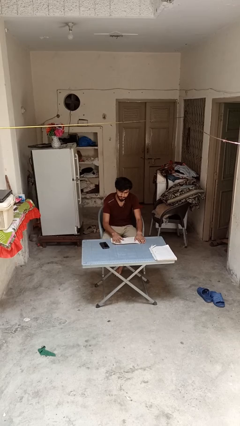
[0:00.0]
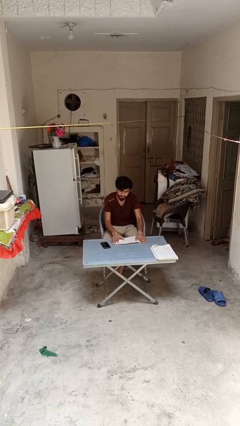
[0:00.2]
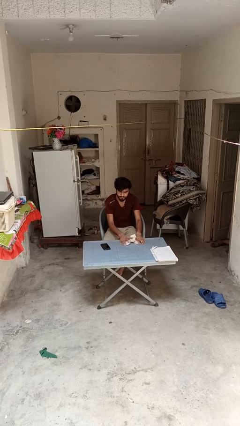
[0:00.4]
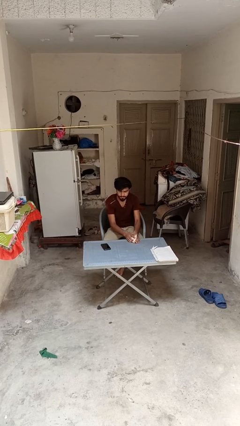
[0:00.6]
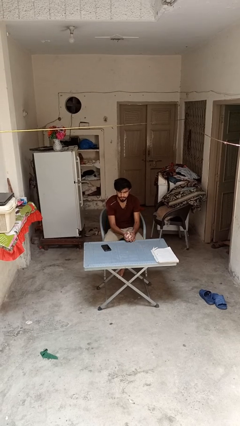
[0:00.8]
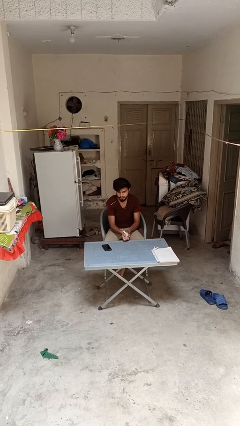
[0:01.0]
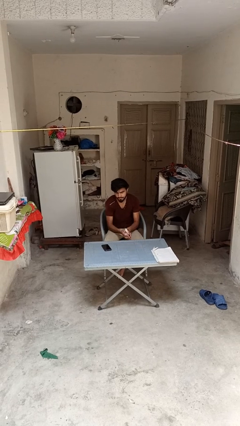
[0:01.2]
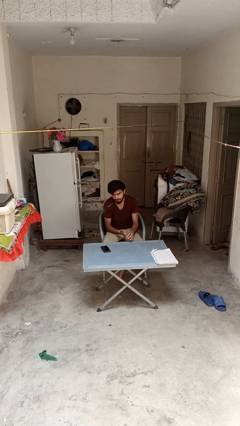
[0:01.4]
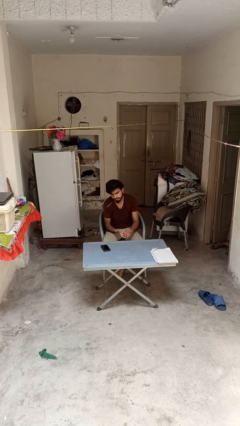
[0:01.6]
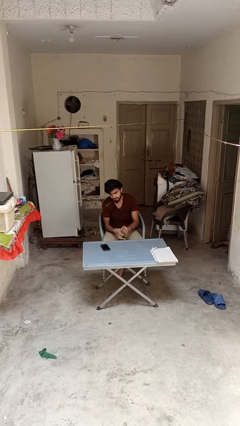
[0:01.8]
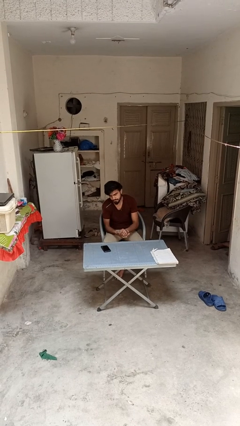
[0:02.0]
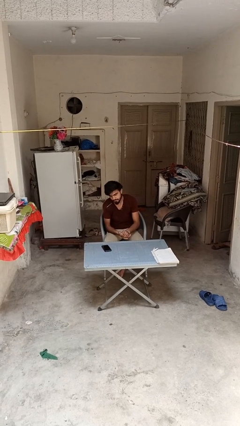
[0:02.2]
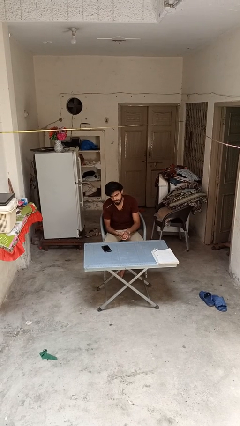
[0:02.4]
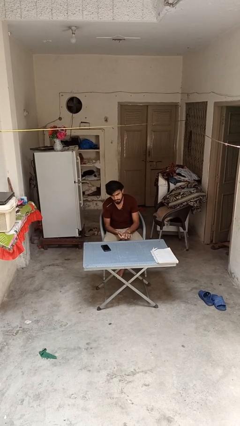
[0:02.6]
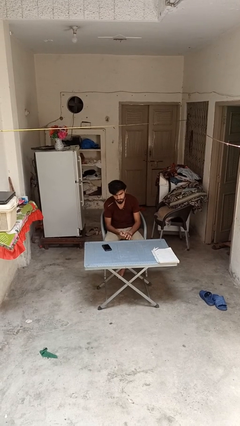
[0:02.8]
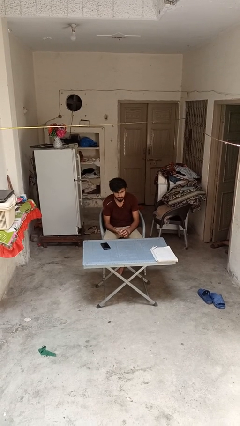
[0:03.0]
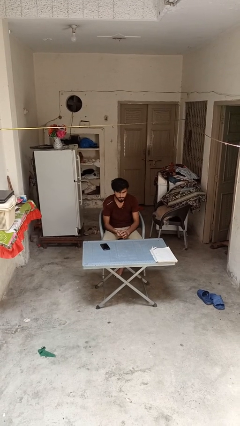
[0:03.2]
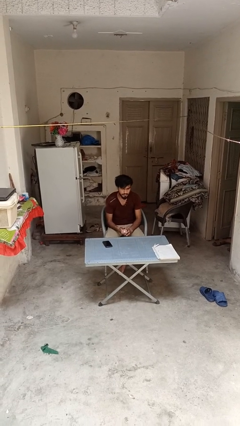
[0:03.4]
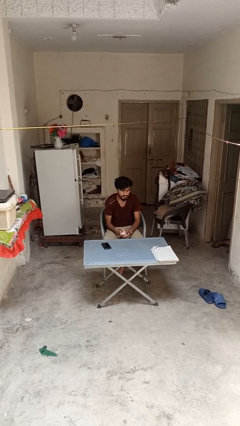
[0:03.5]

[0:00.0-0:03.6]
person crumples paper

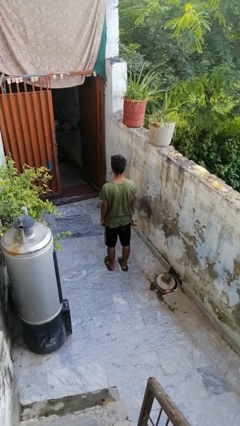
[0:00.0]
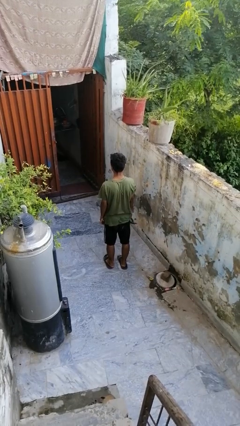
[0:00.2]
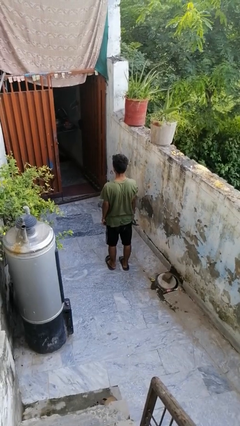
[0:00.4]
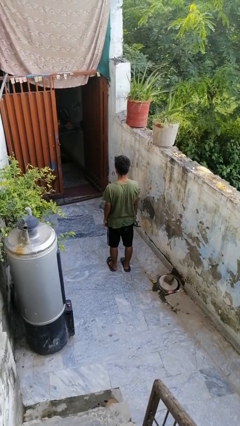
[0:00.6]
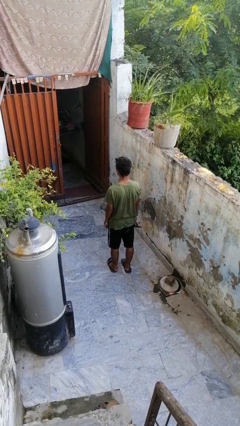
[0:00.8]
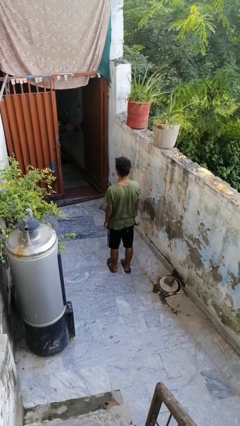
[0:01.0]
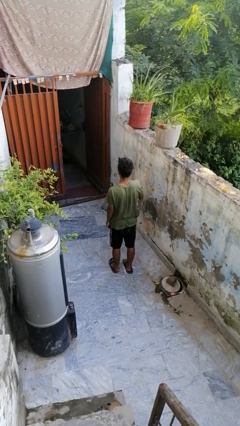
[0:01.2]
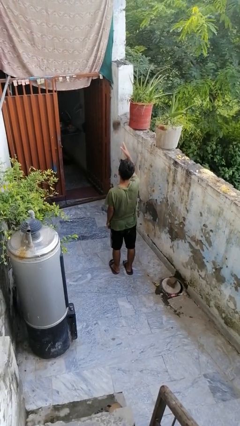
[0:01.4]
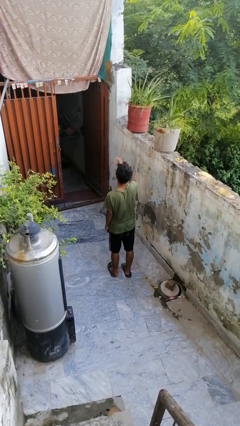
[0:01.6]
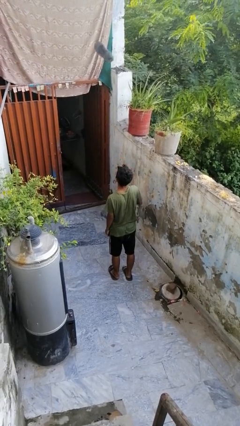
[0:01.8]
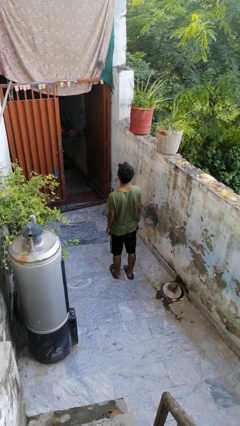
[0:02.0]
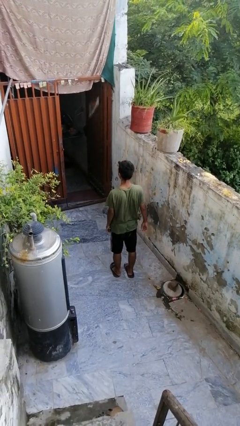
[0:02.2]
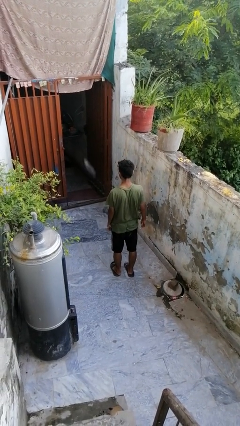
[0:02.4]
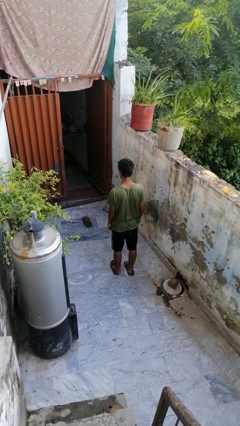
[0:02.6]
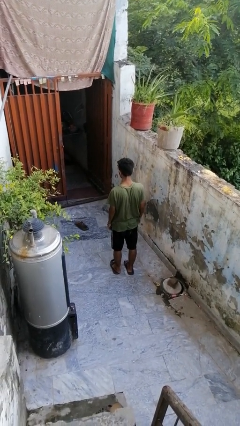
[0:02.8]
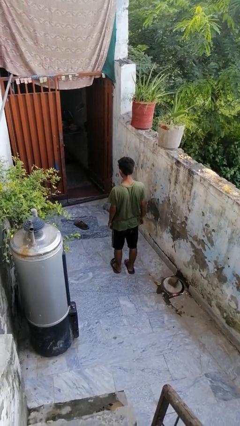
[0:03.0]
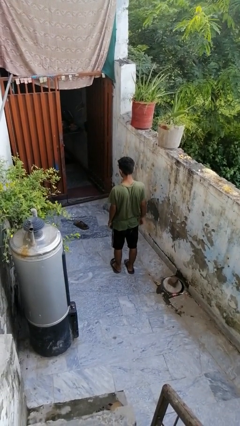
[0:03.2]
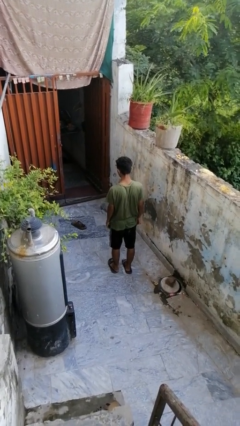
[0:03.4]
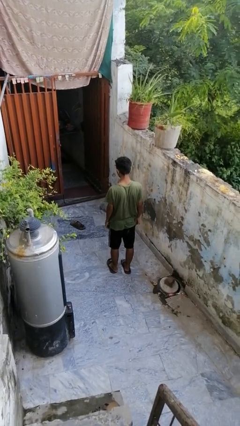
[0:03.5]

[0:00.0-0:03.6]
person throws object into air

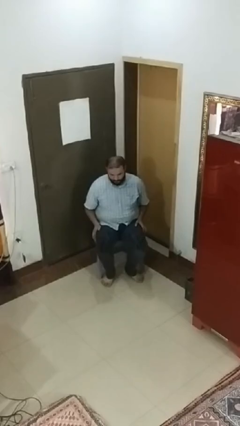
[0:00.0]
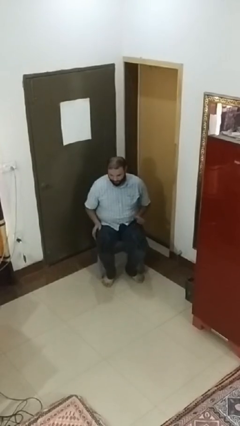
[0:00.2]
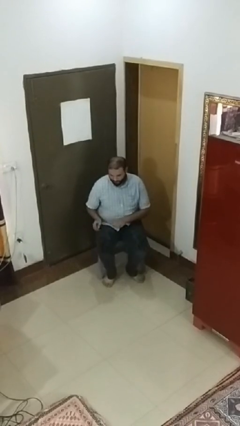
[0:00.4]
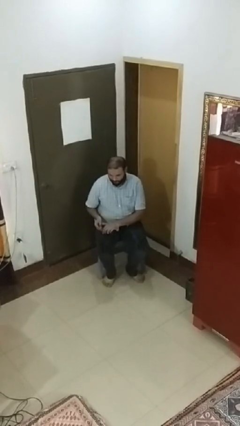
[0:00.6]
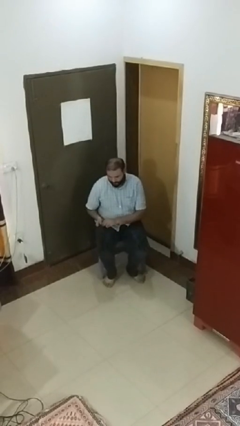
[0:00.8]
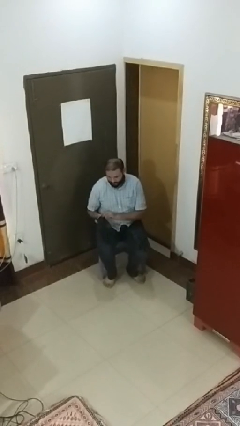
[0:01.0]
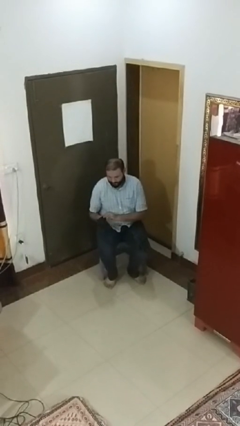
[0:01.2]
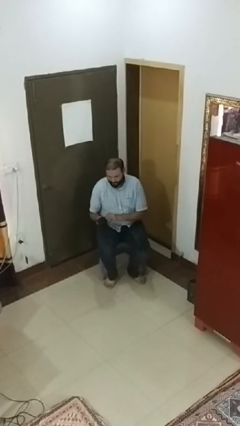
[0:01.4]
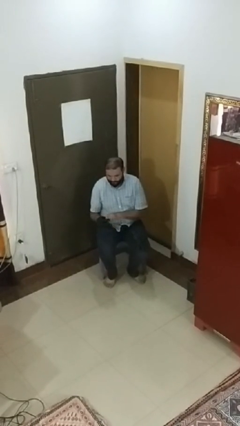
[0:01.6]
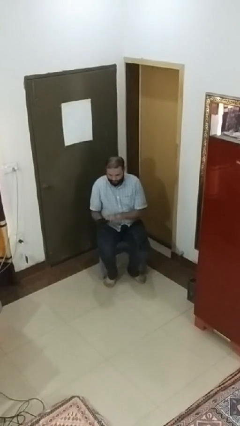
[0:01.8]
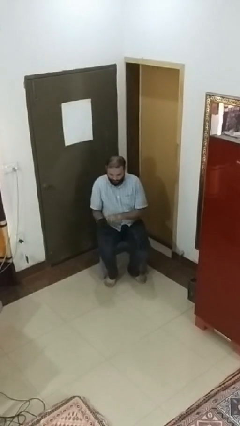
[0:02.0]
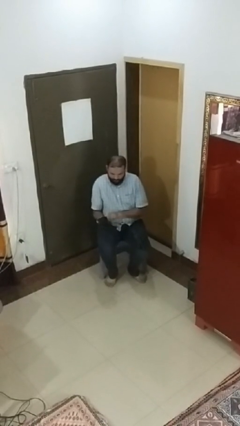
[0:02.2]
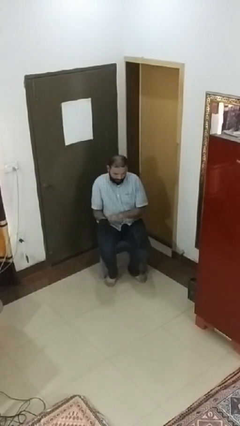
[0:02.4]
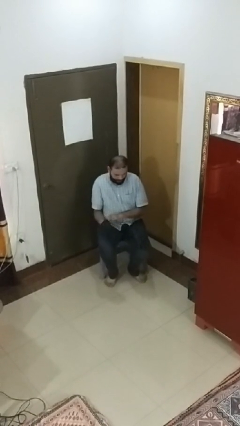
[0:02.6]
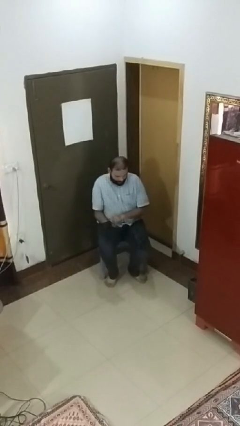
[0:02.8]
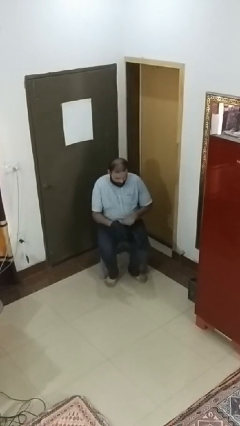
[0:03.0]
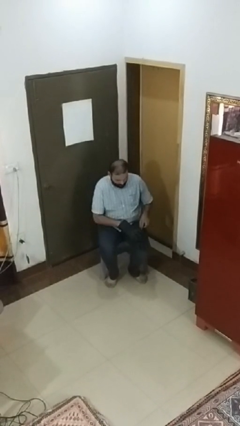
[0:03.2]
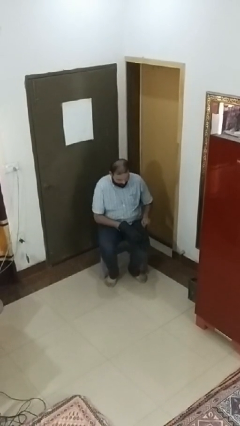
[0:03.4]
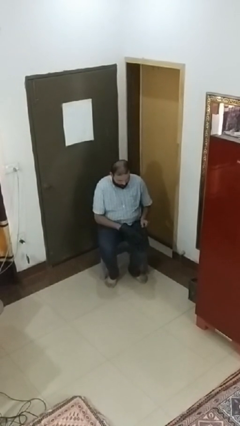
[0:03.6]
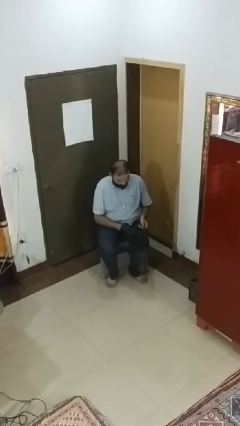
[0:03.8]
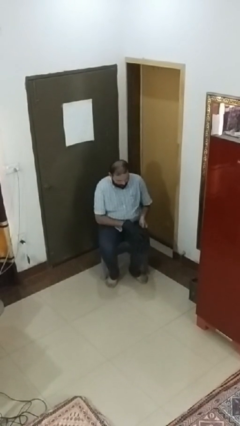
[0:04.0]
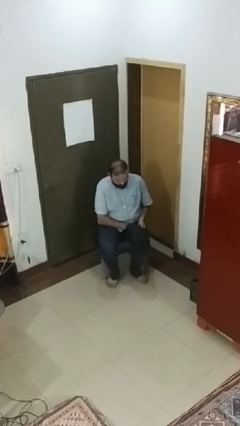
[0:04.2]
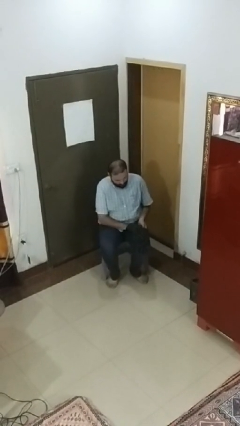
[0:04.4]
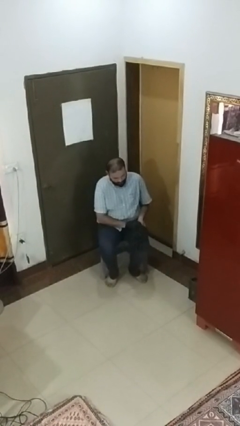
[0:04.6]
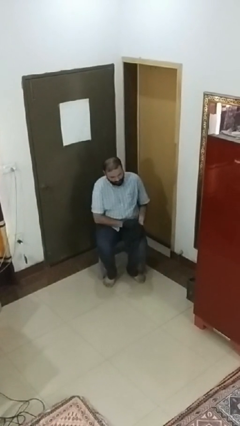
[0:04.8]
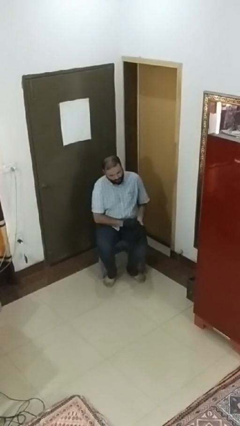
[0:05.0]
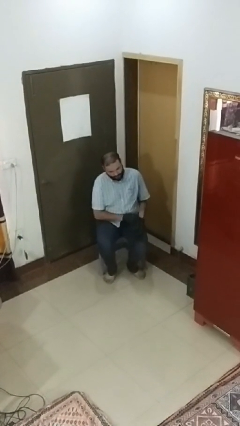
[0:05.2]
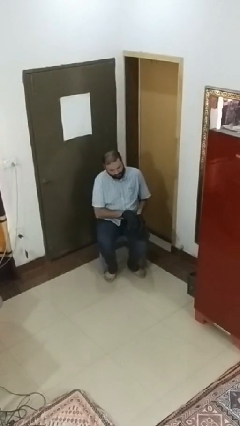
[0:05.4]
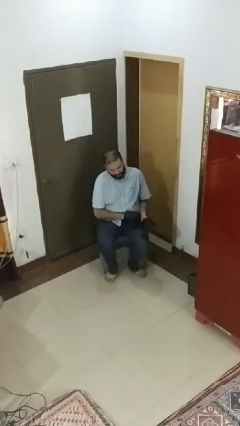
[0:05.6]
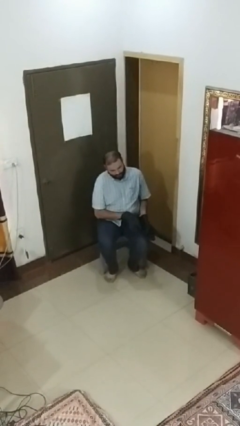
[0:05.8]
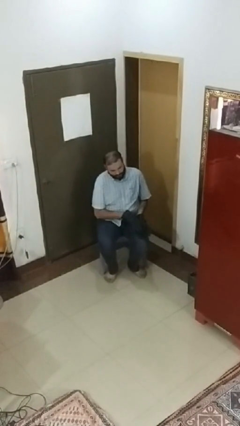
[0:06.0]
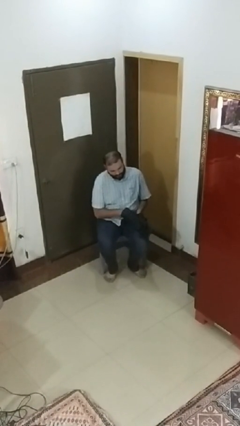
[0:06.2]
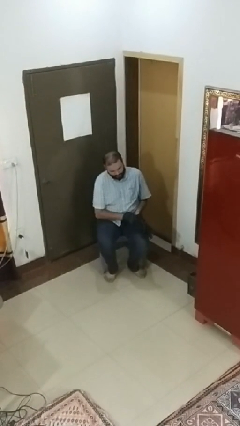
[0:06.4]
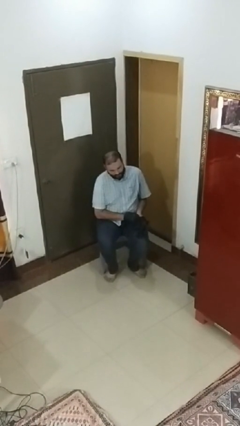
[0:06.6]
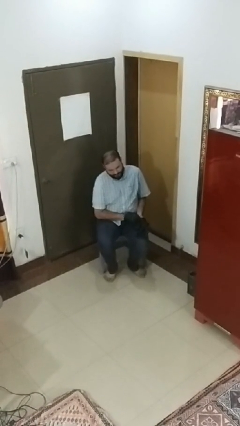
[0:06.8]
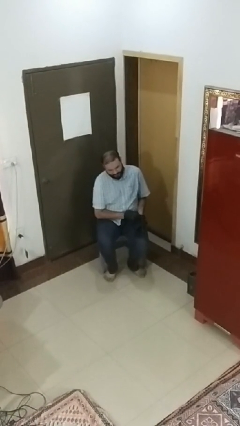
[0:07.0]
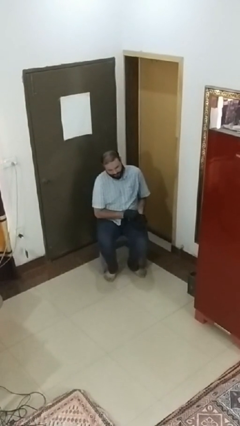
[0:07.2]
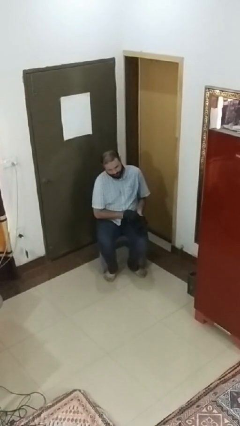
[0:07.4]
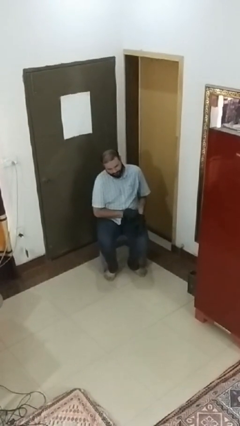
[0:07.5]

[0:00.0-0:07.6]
person puts on gloves

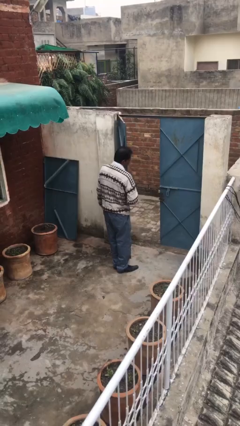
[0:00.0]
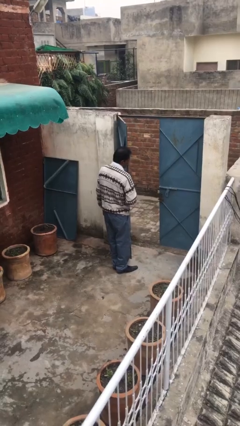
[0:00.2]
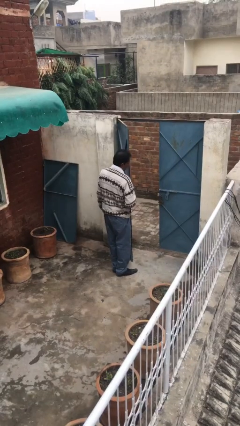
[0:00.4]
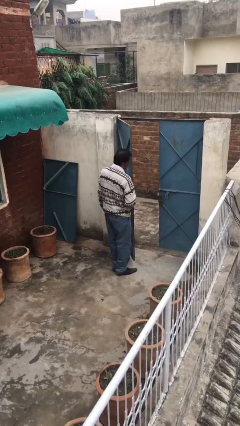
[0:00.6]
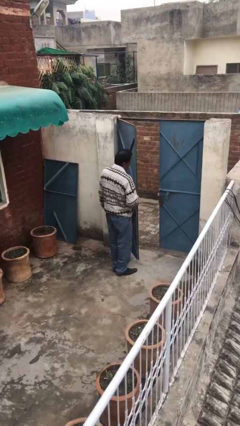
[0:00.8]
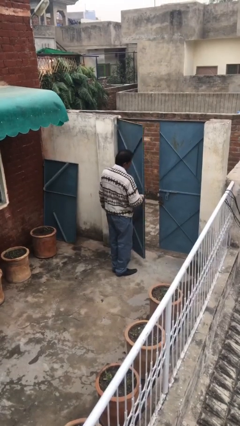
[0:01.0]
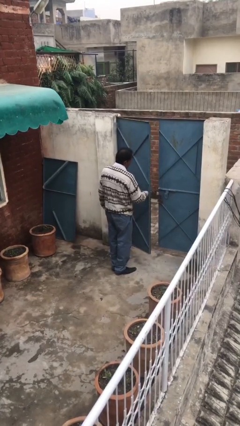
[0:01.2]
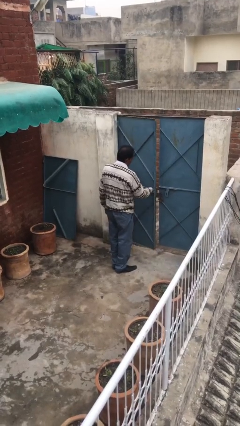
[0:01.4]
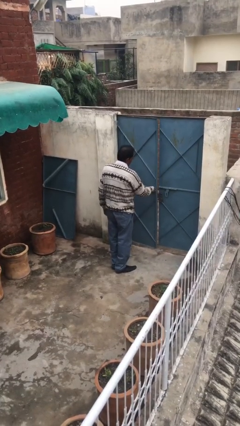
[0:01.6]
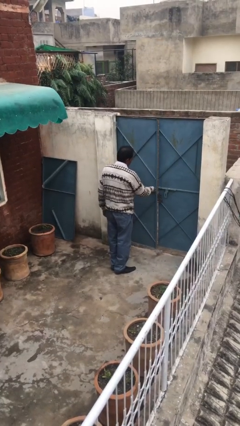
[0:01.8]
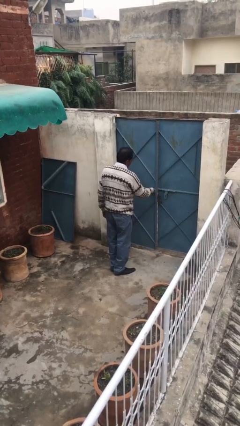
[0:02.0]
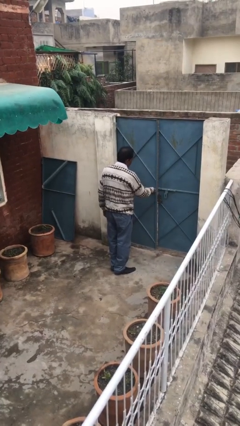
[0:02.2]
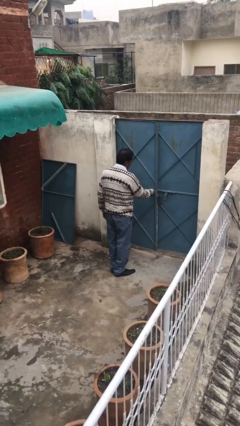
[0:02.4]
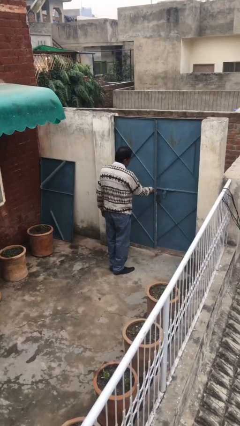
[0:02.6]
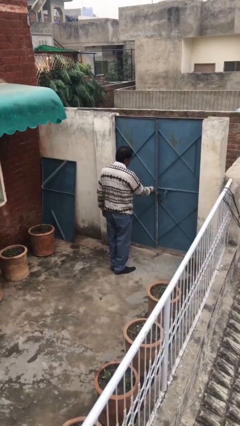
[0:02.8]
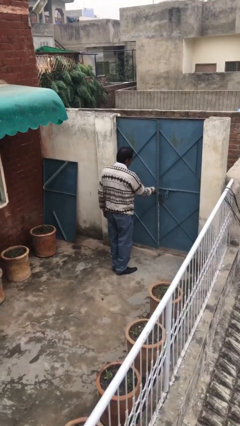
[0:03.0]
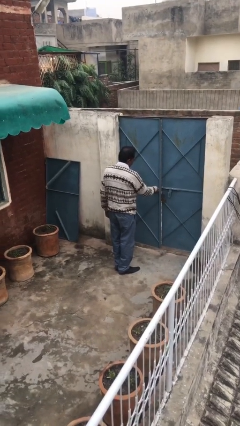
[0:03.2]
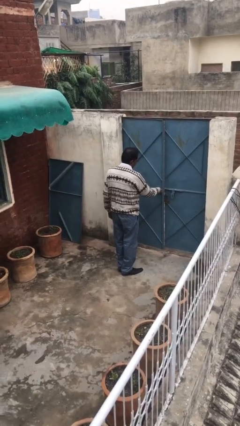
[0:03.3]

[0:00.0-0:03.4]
person closes facility door
